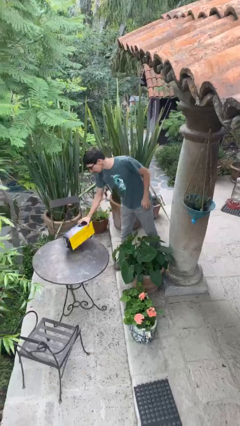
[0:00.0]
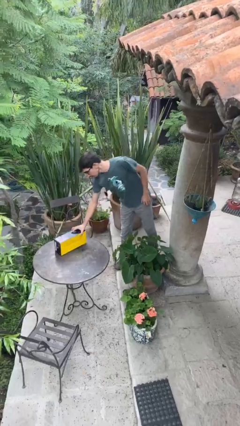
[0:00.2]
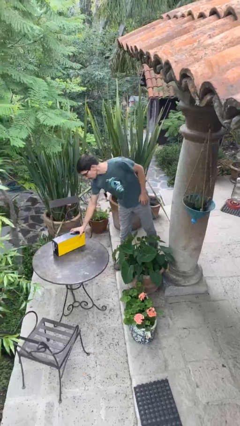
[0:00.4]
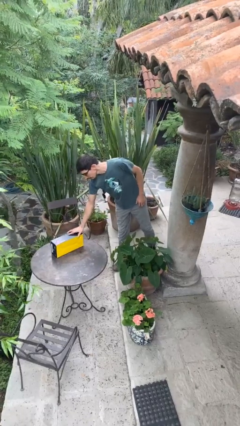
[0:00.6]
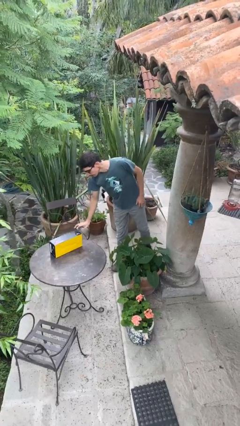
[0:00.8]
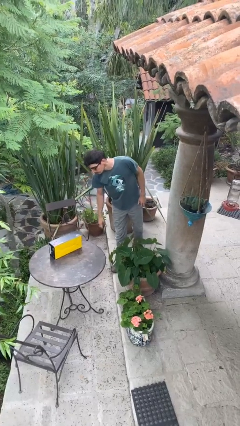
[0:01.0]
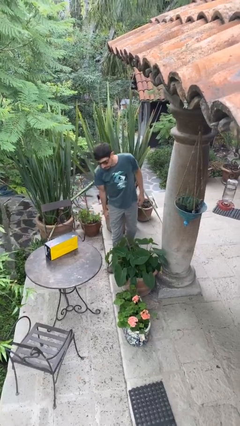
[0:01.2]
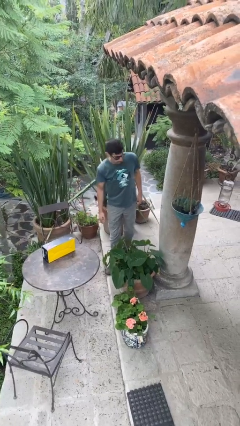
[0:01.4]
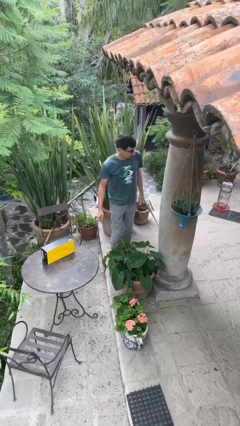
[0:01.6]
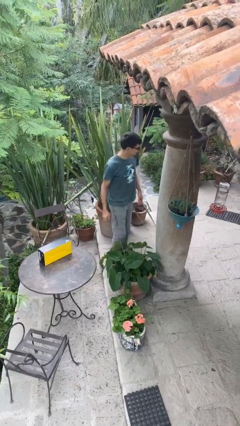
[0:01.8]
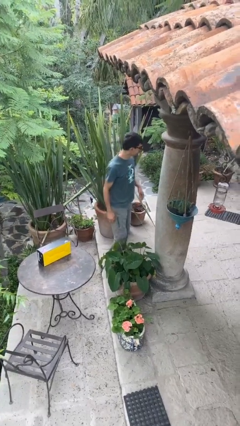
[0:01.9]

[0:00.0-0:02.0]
person puts down object on table

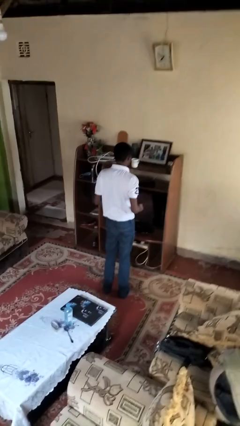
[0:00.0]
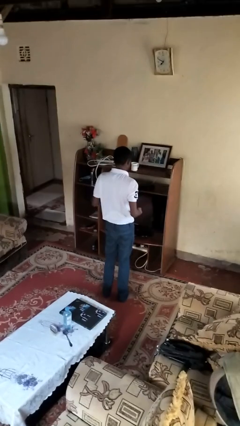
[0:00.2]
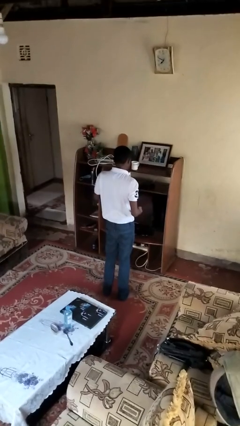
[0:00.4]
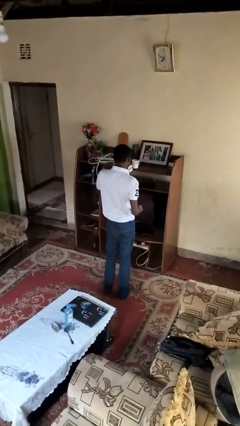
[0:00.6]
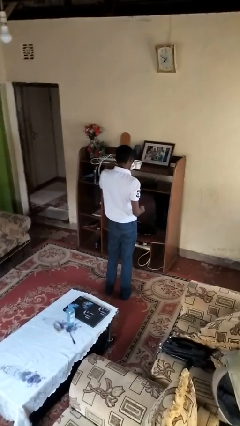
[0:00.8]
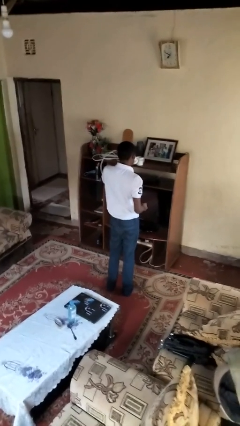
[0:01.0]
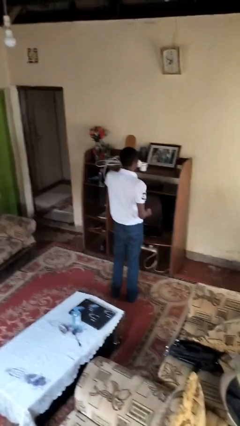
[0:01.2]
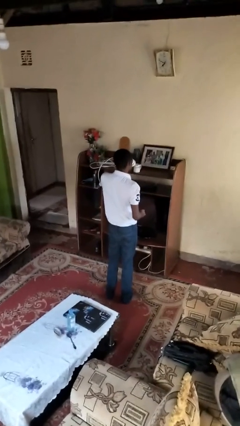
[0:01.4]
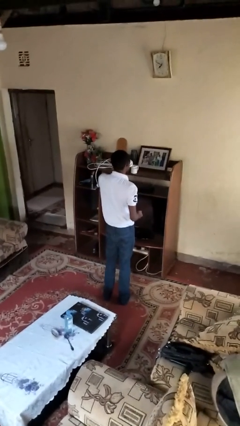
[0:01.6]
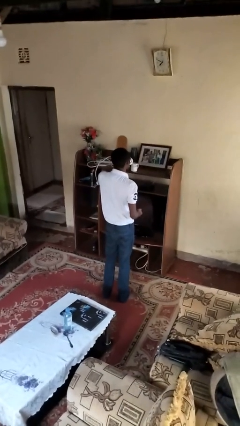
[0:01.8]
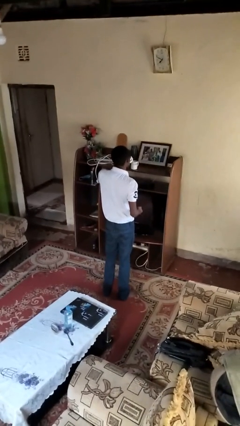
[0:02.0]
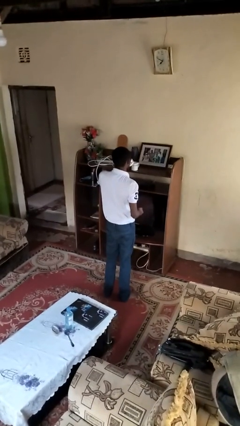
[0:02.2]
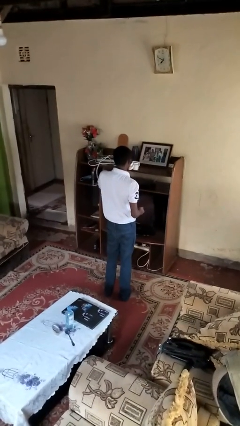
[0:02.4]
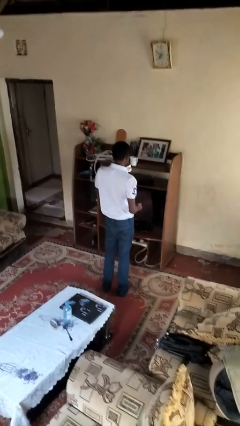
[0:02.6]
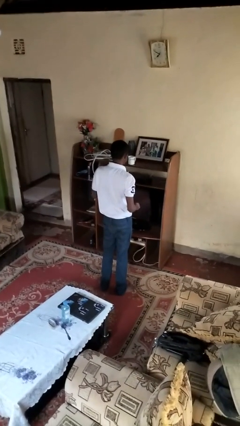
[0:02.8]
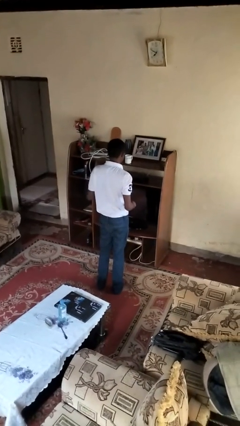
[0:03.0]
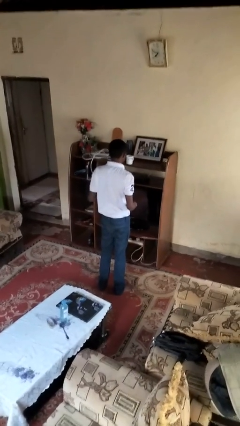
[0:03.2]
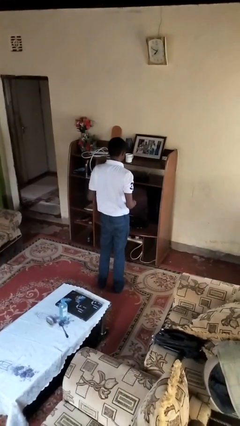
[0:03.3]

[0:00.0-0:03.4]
person drinks from cup

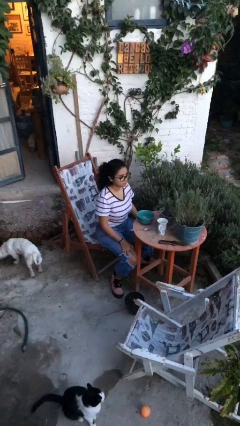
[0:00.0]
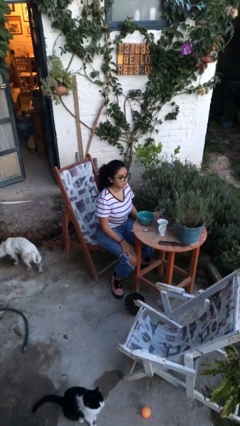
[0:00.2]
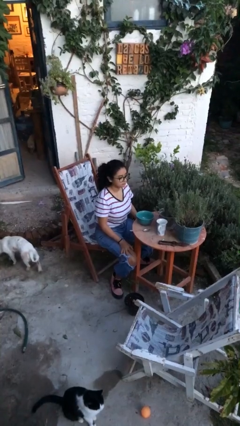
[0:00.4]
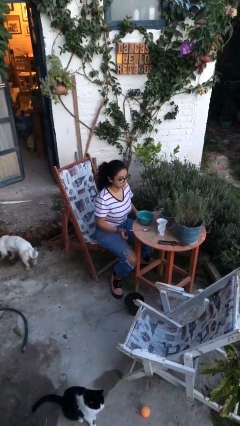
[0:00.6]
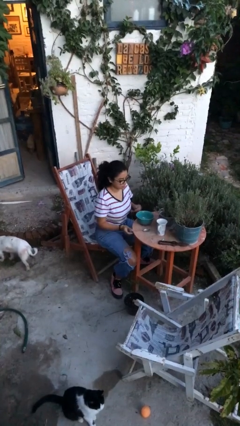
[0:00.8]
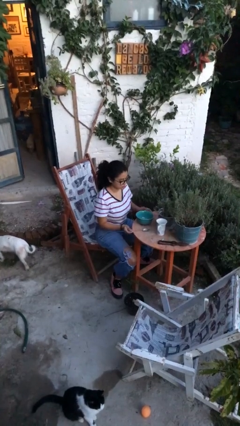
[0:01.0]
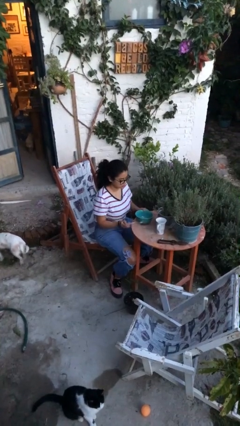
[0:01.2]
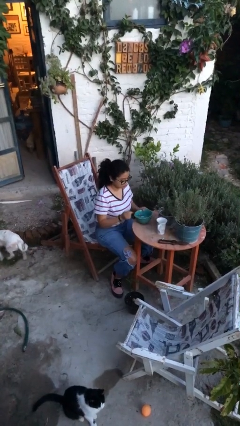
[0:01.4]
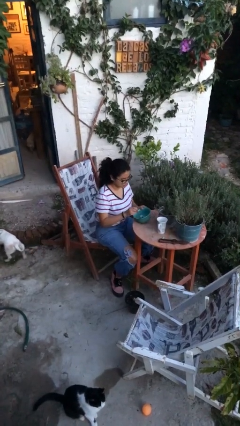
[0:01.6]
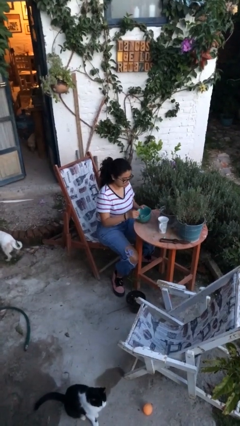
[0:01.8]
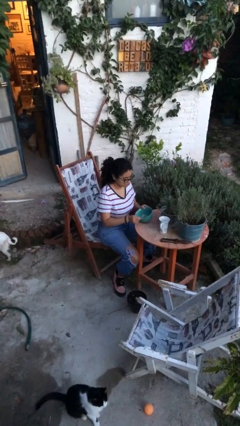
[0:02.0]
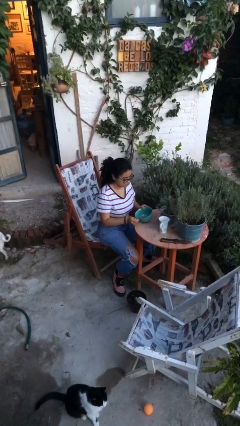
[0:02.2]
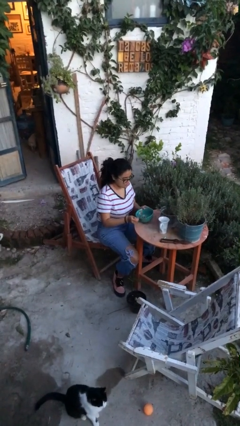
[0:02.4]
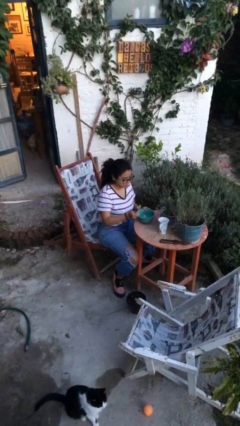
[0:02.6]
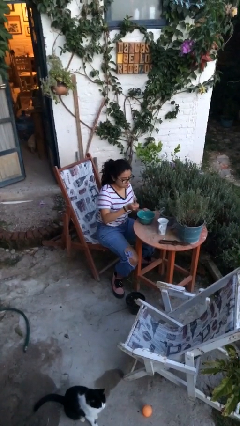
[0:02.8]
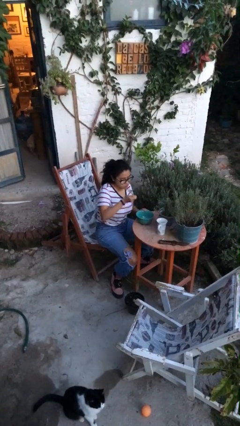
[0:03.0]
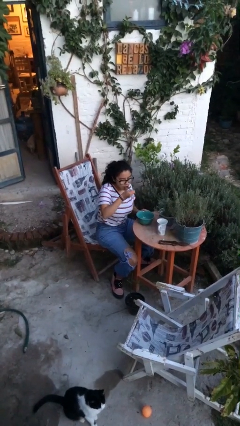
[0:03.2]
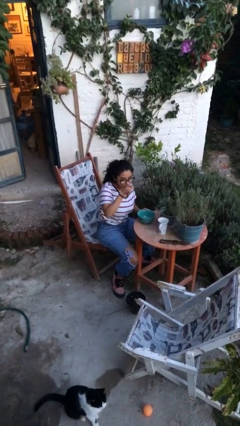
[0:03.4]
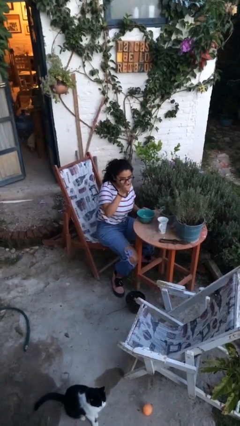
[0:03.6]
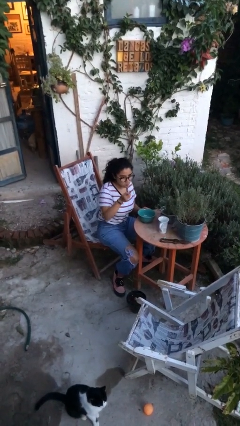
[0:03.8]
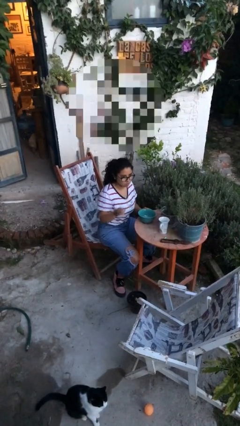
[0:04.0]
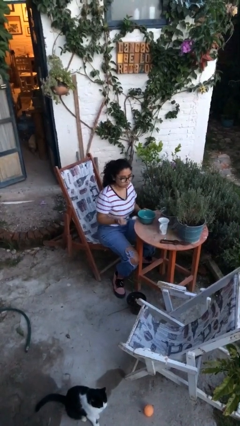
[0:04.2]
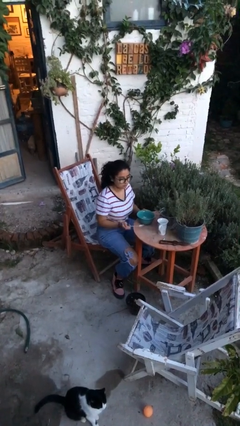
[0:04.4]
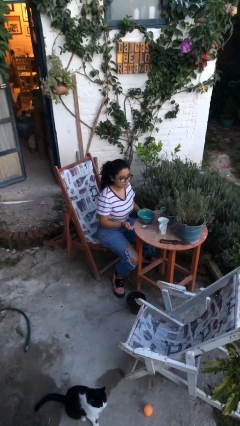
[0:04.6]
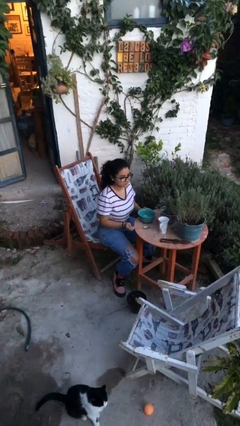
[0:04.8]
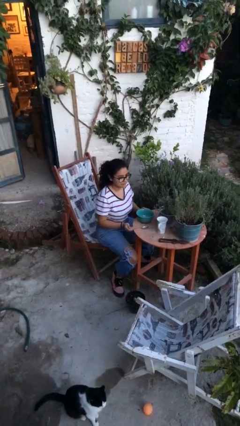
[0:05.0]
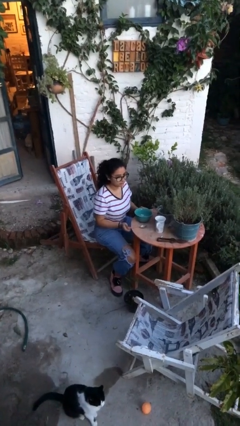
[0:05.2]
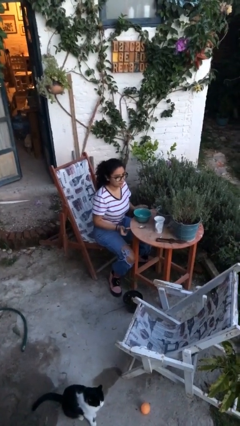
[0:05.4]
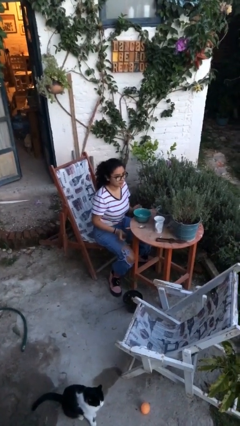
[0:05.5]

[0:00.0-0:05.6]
person eats with utensil

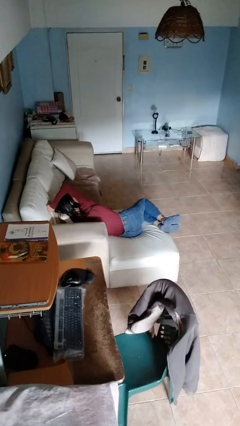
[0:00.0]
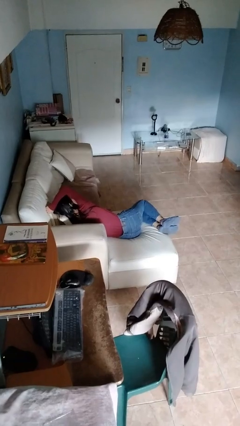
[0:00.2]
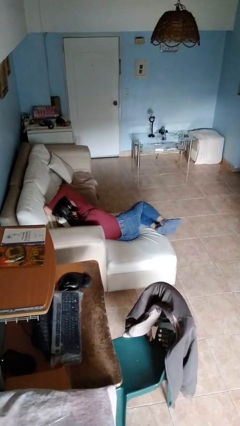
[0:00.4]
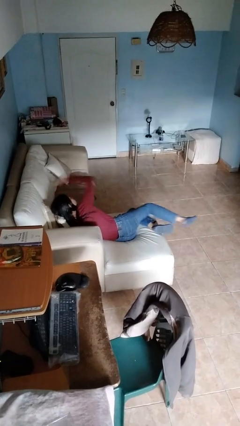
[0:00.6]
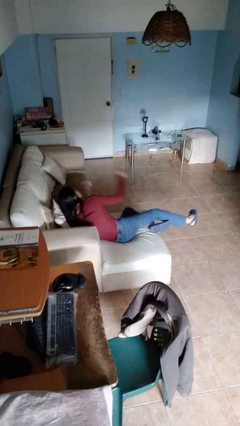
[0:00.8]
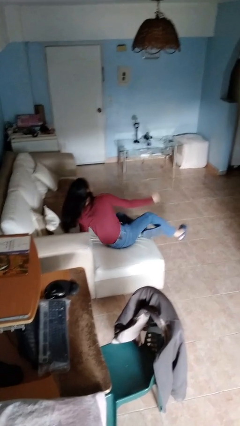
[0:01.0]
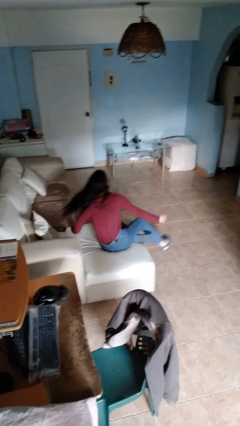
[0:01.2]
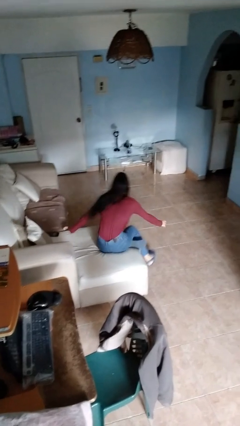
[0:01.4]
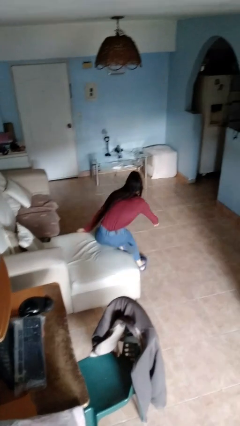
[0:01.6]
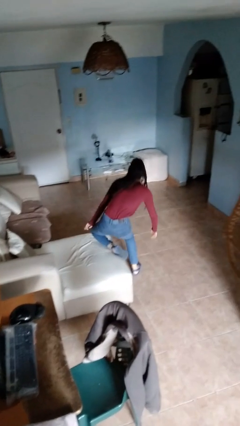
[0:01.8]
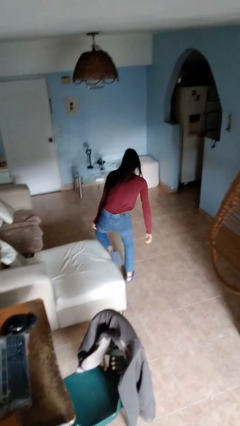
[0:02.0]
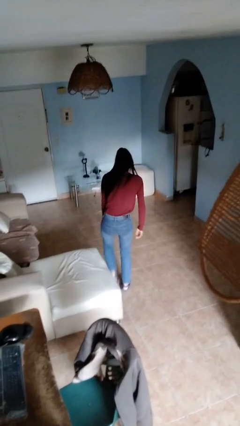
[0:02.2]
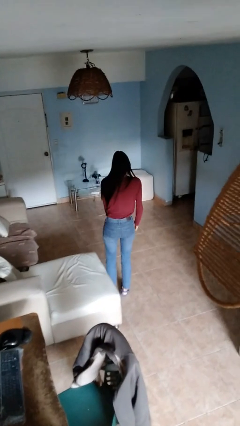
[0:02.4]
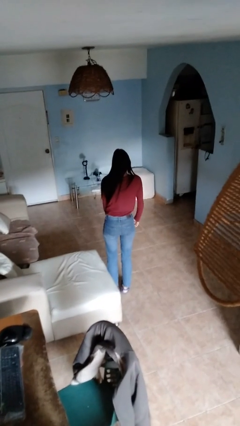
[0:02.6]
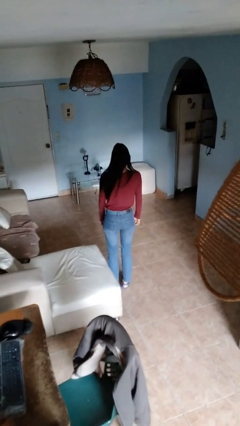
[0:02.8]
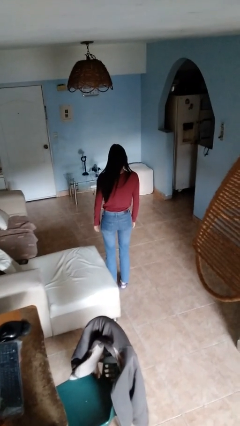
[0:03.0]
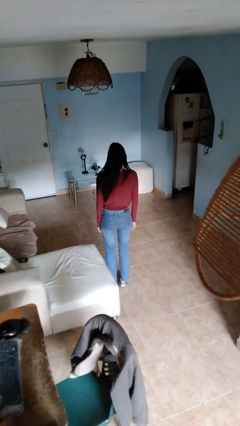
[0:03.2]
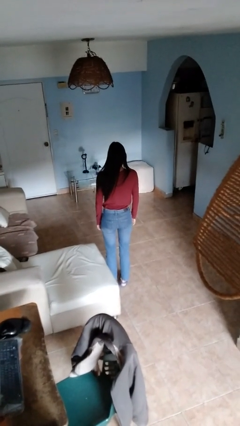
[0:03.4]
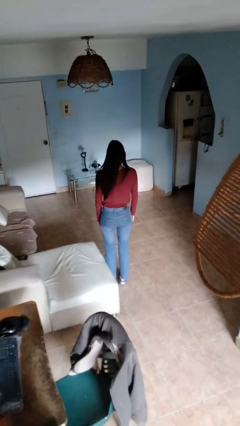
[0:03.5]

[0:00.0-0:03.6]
person stands up

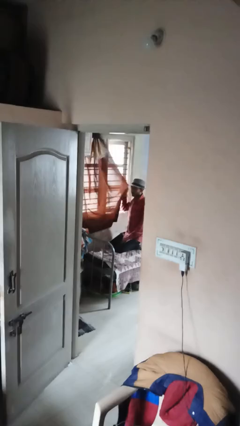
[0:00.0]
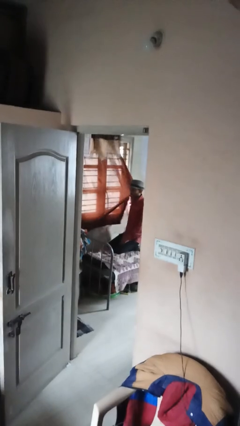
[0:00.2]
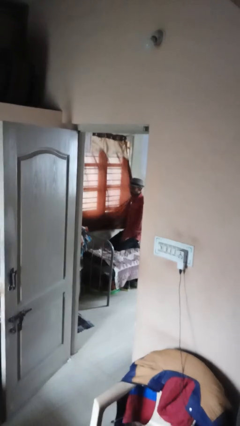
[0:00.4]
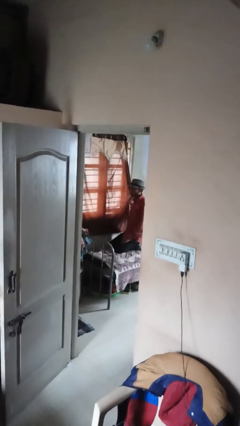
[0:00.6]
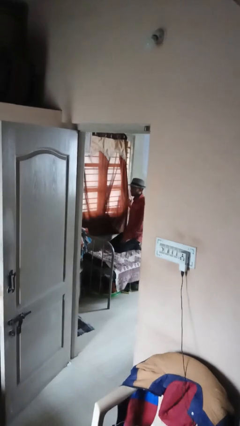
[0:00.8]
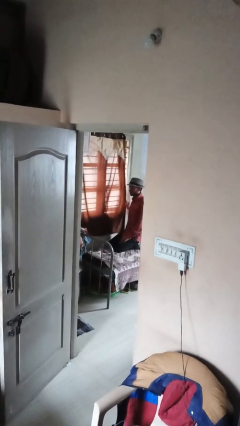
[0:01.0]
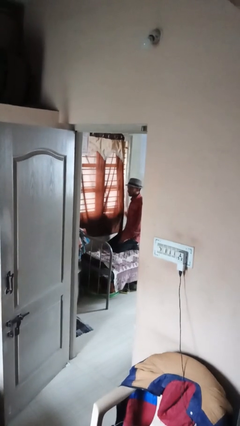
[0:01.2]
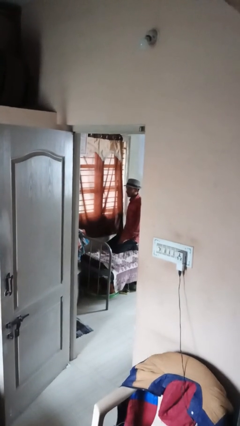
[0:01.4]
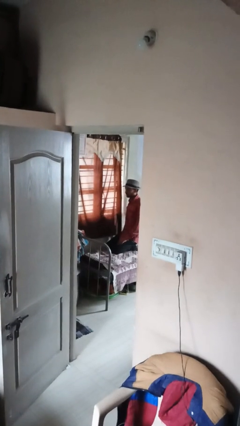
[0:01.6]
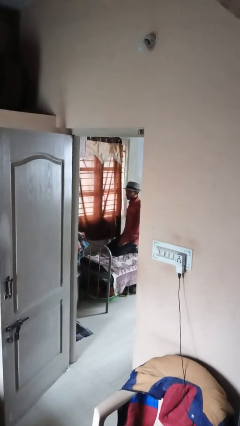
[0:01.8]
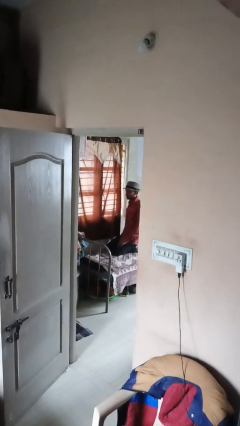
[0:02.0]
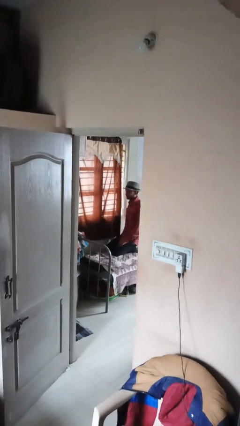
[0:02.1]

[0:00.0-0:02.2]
person closes curtains

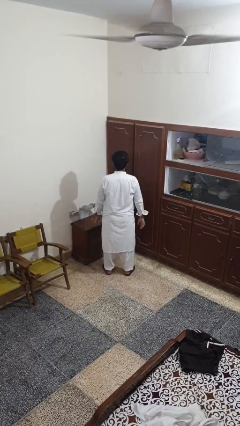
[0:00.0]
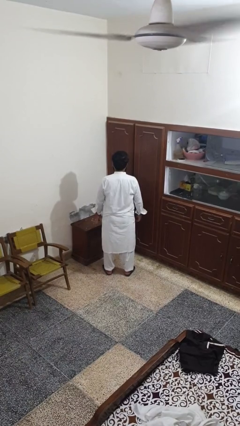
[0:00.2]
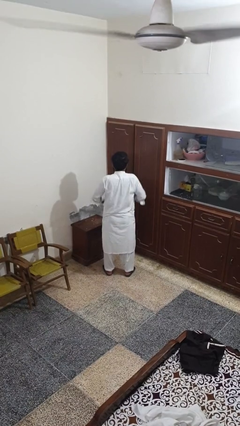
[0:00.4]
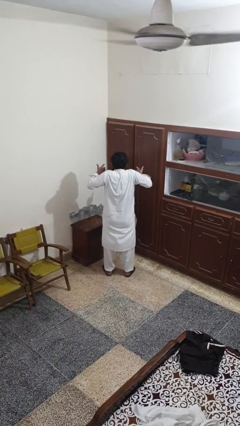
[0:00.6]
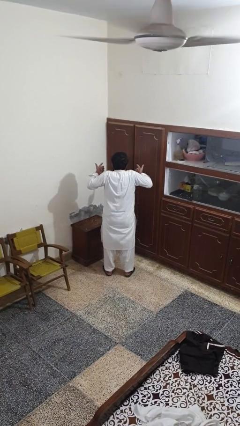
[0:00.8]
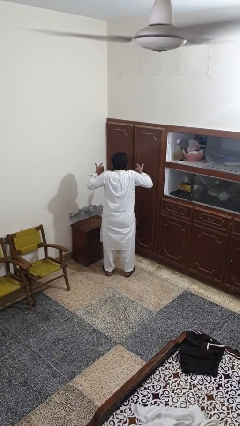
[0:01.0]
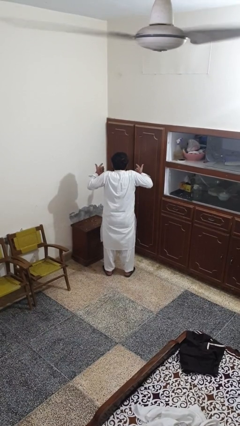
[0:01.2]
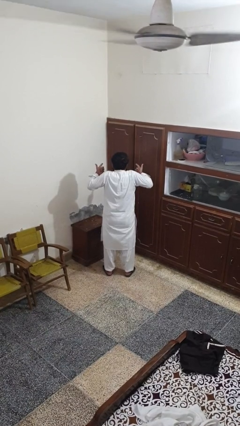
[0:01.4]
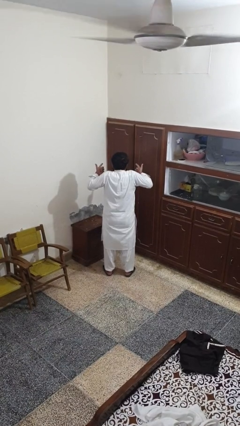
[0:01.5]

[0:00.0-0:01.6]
person shrugs
